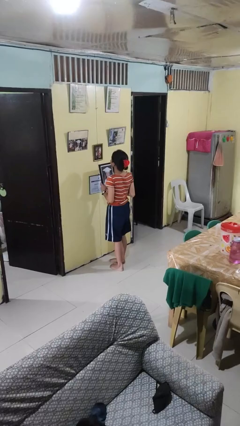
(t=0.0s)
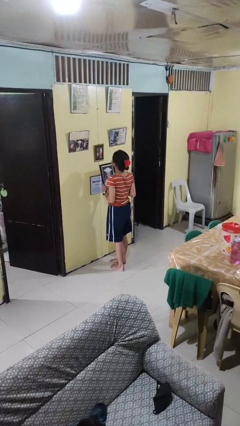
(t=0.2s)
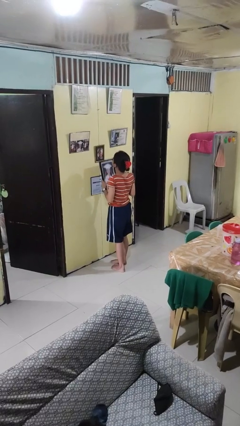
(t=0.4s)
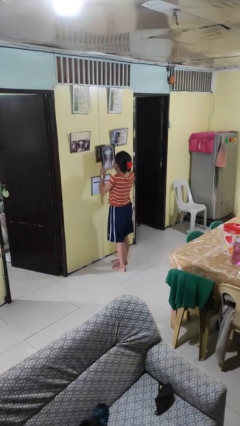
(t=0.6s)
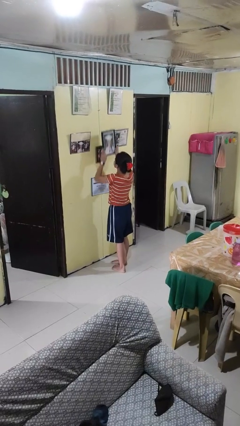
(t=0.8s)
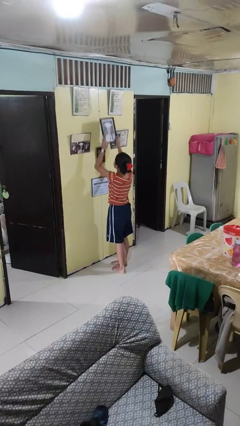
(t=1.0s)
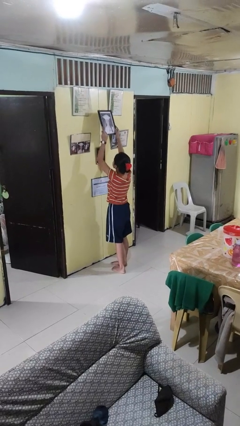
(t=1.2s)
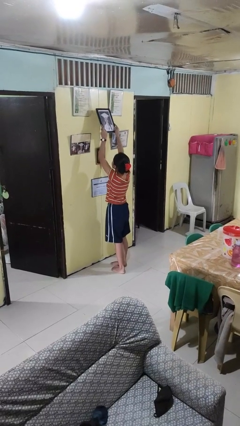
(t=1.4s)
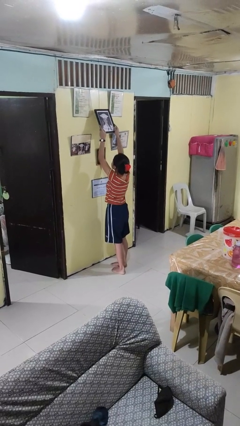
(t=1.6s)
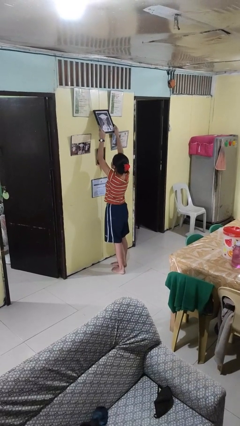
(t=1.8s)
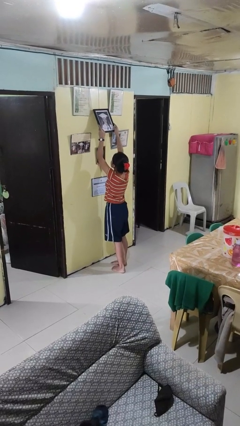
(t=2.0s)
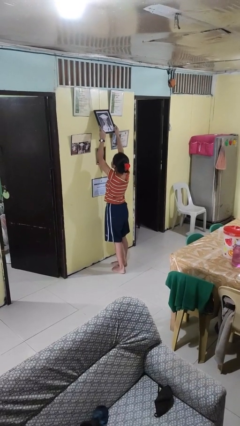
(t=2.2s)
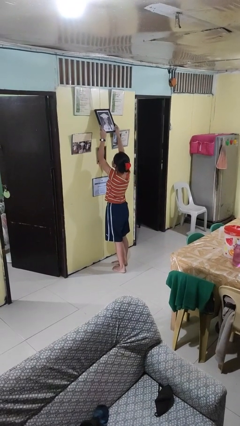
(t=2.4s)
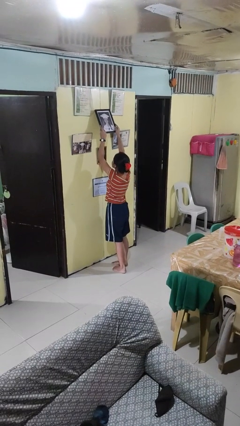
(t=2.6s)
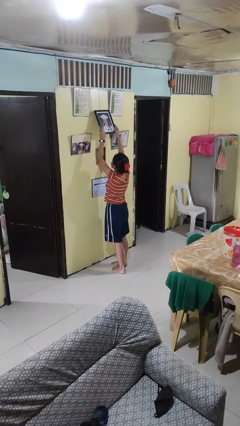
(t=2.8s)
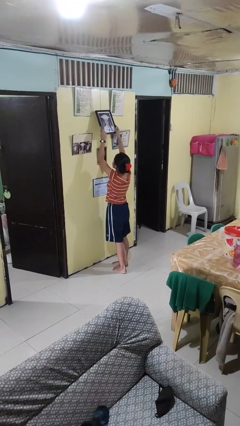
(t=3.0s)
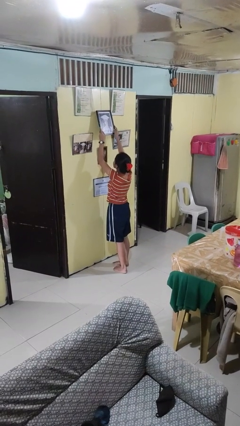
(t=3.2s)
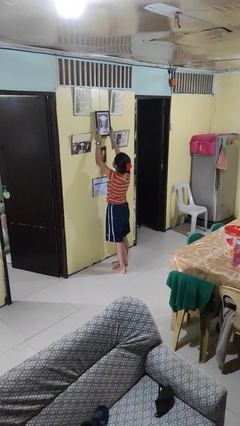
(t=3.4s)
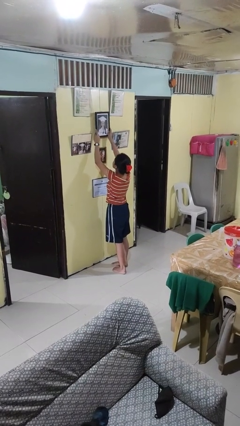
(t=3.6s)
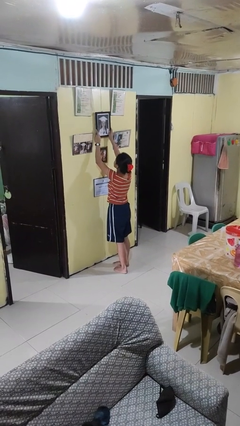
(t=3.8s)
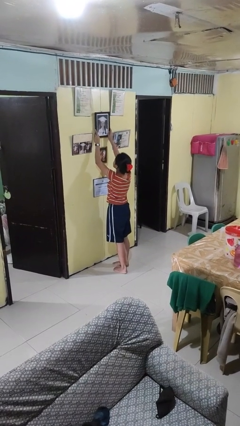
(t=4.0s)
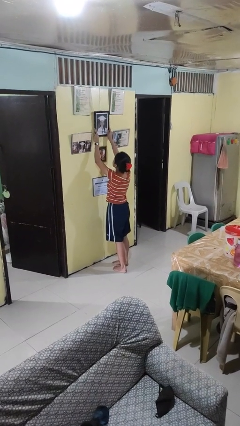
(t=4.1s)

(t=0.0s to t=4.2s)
person puts up picture frame

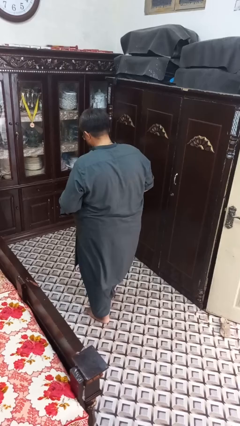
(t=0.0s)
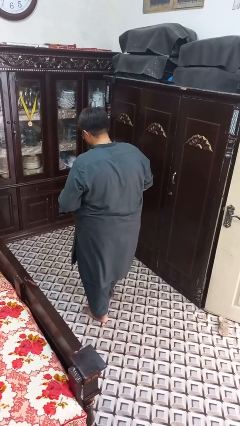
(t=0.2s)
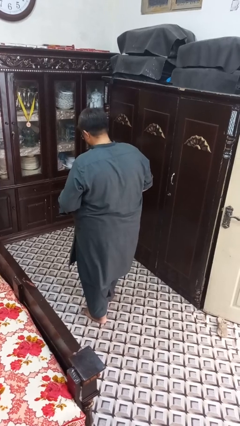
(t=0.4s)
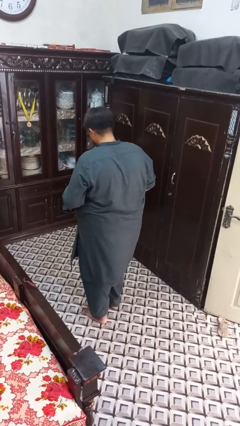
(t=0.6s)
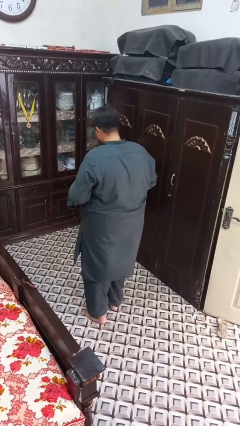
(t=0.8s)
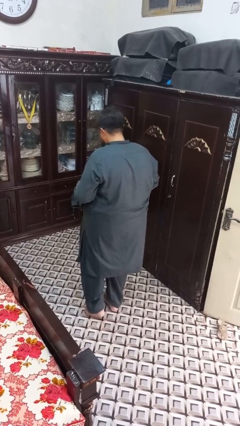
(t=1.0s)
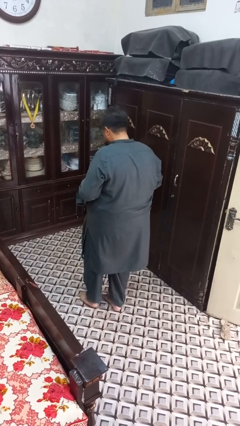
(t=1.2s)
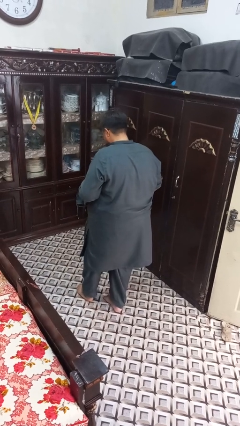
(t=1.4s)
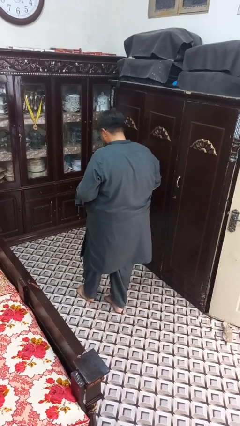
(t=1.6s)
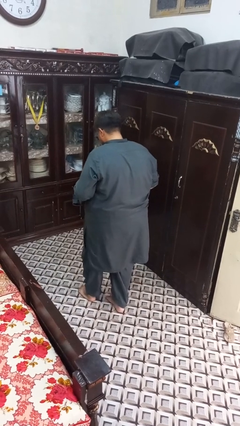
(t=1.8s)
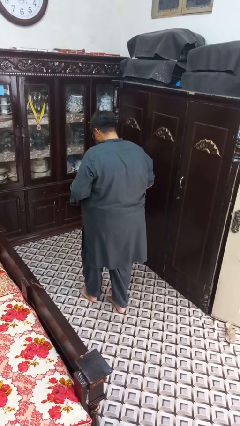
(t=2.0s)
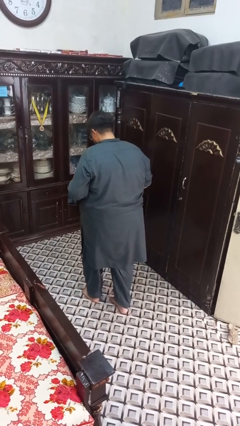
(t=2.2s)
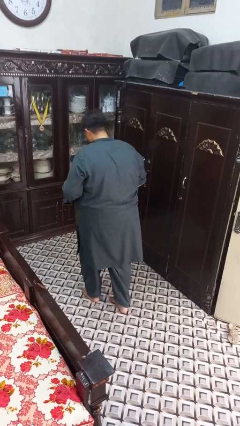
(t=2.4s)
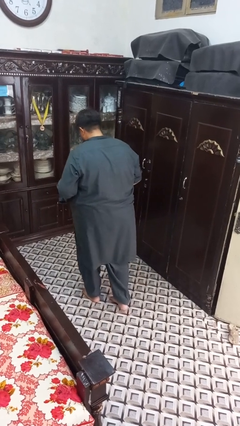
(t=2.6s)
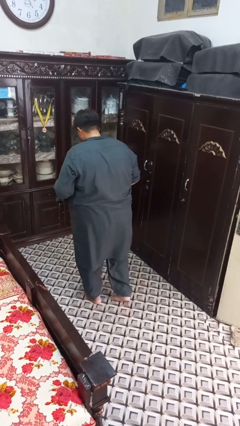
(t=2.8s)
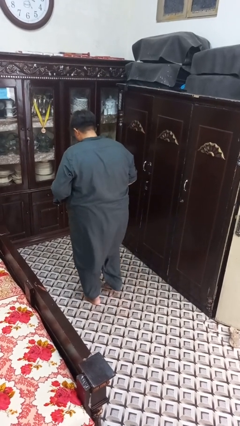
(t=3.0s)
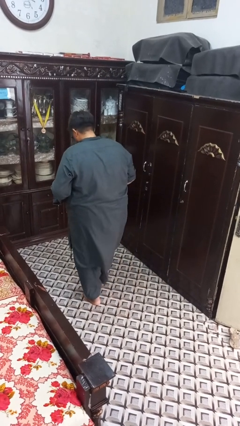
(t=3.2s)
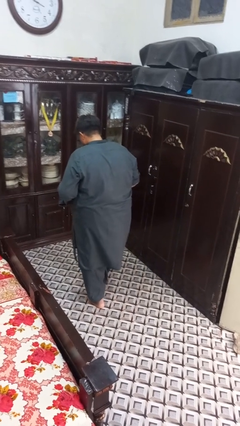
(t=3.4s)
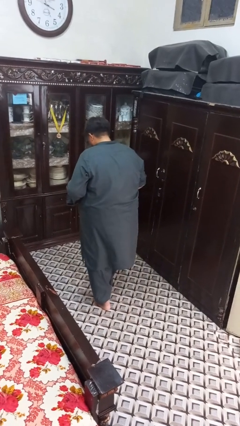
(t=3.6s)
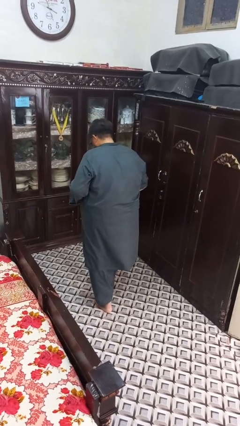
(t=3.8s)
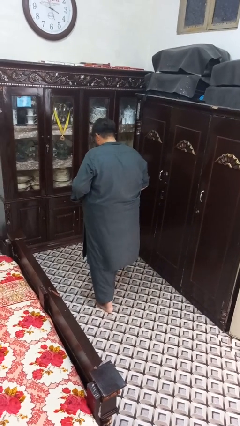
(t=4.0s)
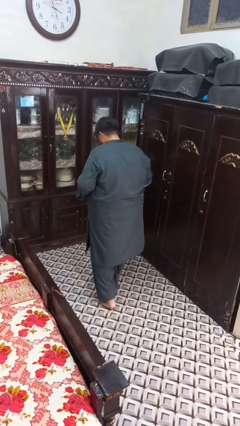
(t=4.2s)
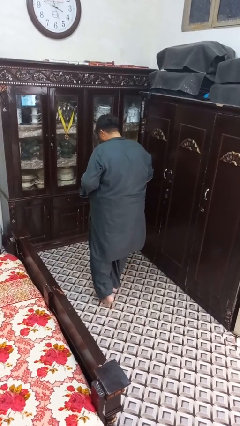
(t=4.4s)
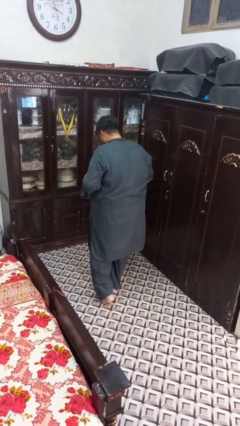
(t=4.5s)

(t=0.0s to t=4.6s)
person walks tiptoe

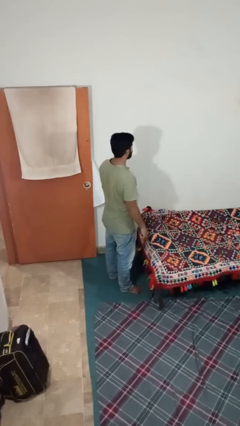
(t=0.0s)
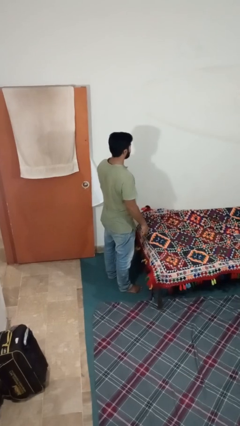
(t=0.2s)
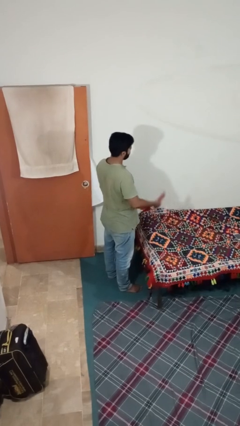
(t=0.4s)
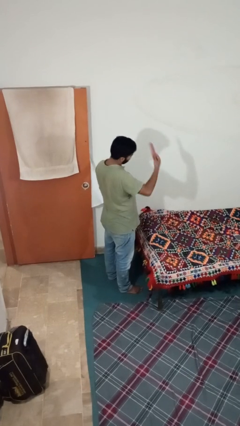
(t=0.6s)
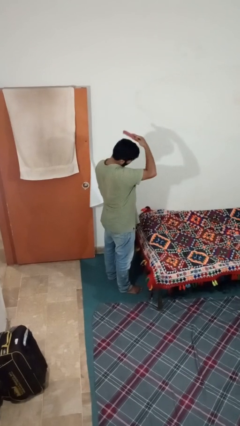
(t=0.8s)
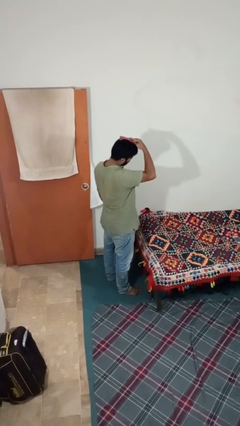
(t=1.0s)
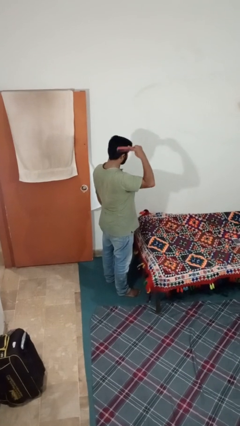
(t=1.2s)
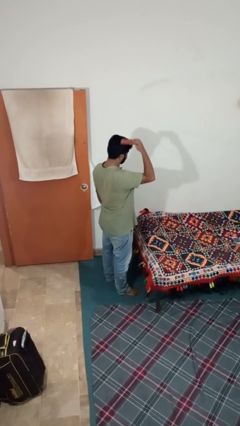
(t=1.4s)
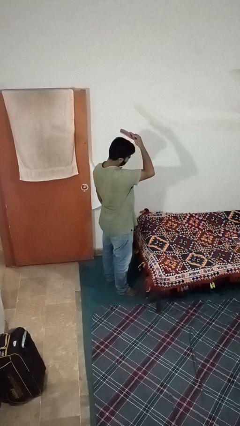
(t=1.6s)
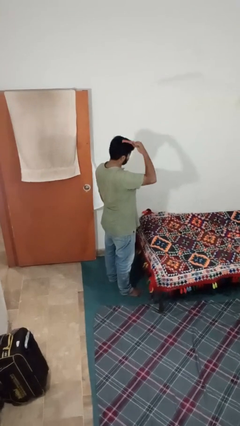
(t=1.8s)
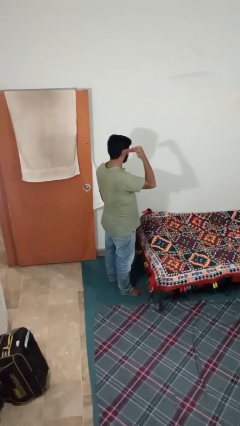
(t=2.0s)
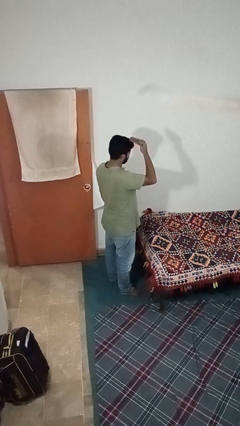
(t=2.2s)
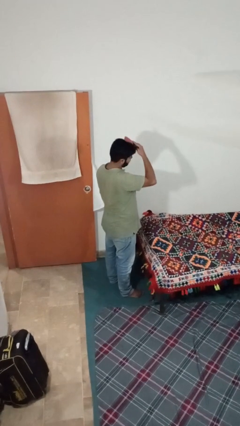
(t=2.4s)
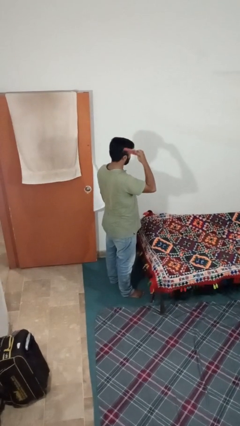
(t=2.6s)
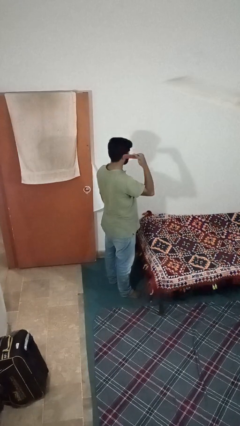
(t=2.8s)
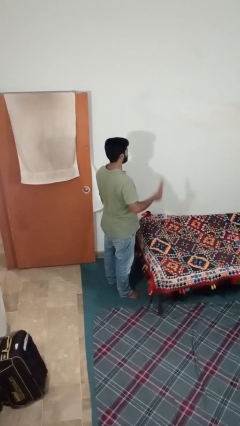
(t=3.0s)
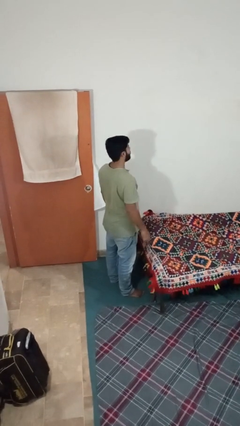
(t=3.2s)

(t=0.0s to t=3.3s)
person brushes hair

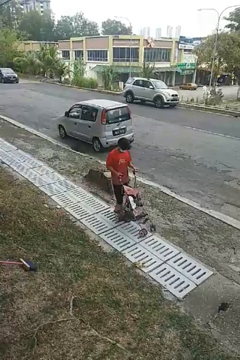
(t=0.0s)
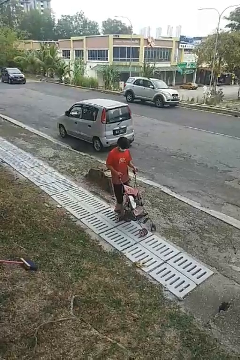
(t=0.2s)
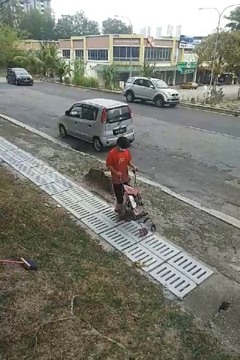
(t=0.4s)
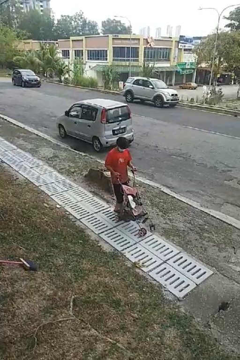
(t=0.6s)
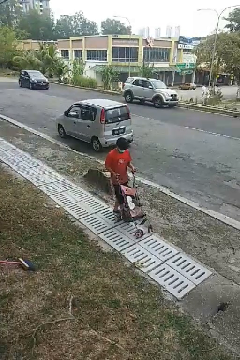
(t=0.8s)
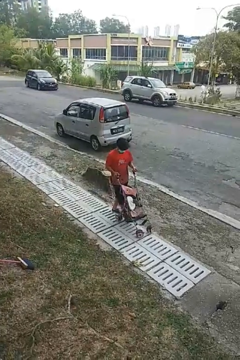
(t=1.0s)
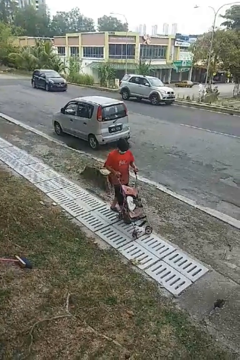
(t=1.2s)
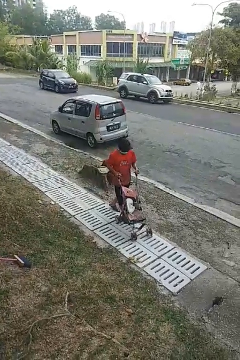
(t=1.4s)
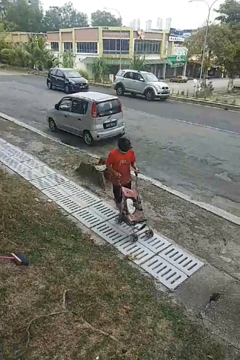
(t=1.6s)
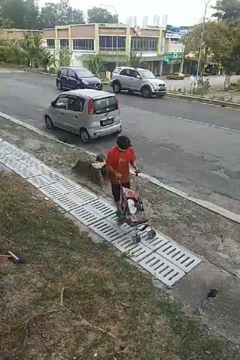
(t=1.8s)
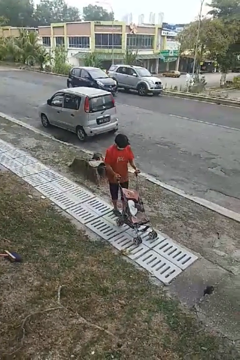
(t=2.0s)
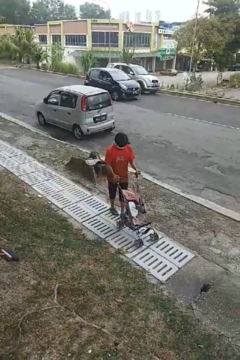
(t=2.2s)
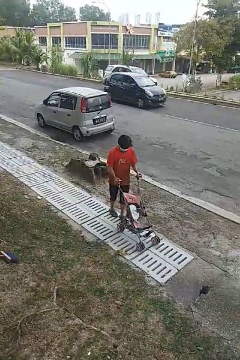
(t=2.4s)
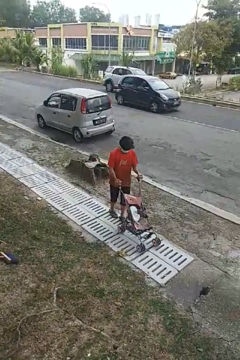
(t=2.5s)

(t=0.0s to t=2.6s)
person pushes wheeled cart

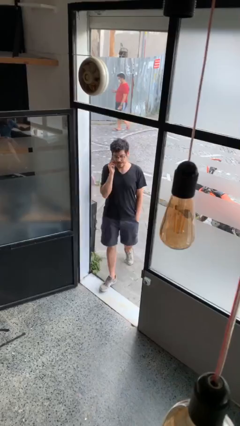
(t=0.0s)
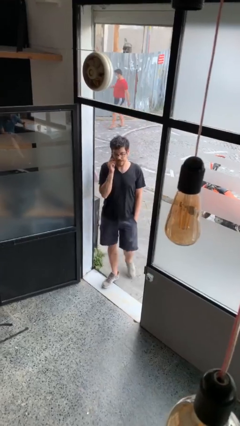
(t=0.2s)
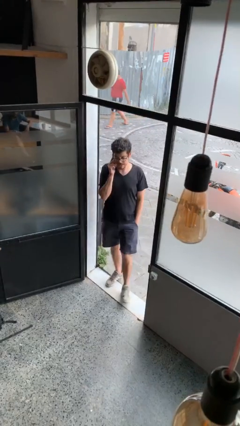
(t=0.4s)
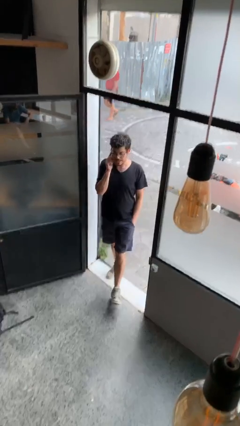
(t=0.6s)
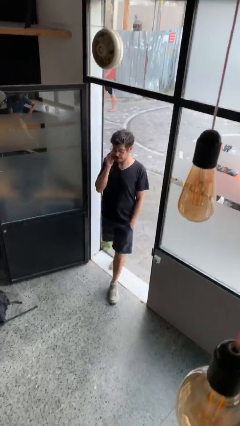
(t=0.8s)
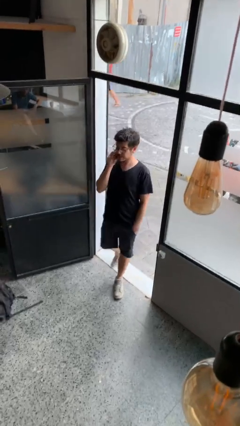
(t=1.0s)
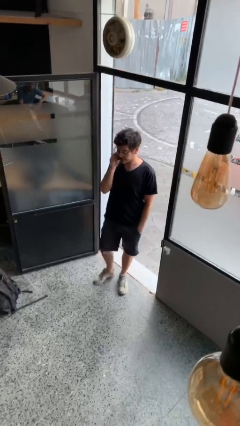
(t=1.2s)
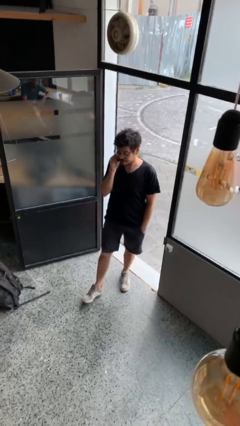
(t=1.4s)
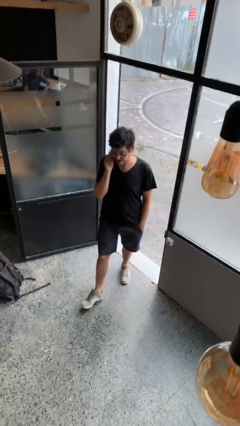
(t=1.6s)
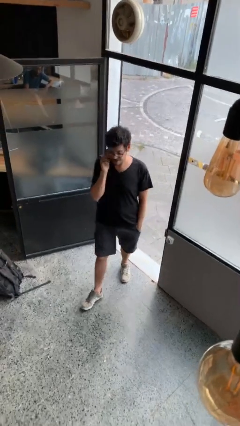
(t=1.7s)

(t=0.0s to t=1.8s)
person enters scene through structure

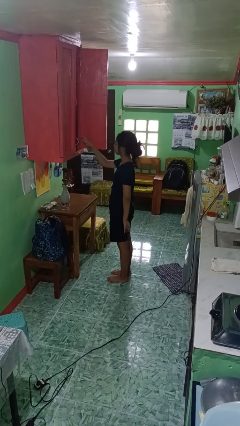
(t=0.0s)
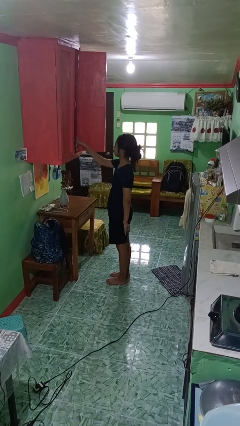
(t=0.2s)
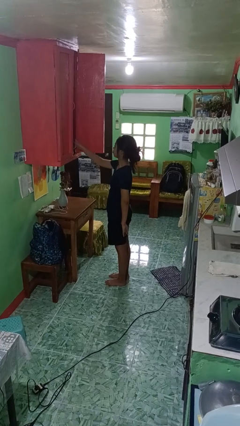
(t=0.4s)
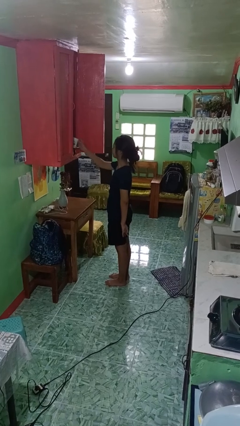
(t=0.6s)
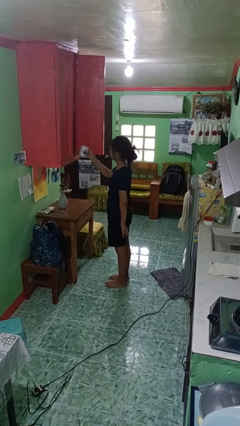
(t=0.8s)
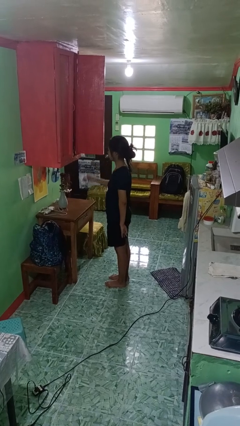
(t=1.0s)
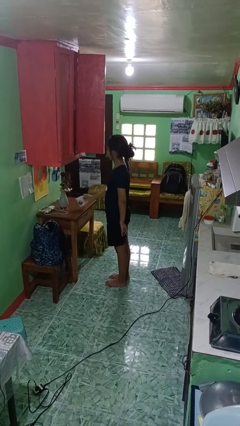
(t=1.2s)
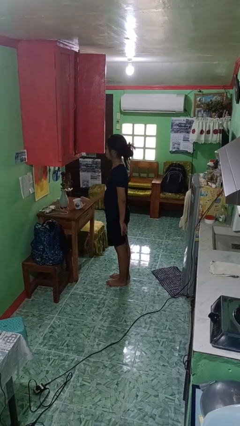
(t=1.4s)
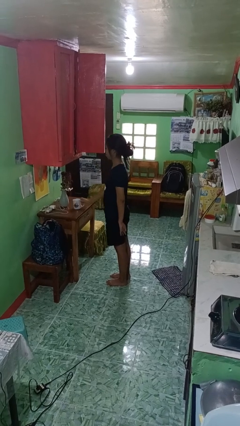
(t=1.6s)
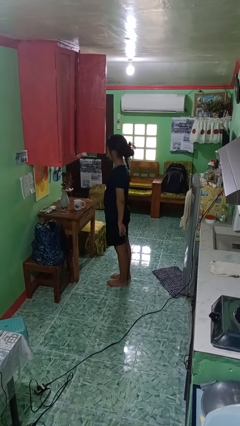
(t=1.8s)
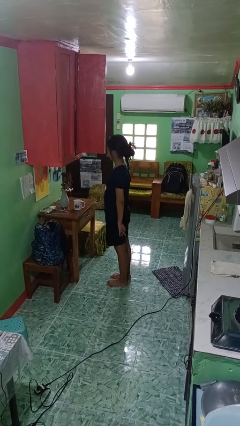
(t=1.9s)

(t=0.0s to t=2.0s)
person takes object from cabinet
